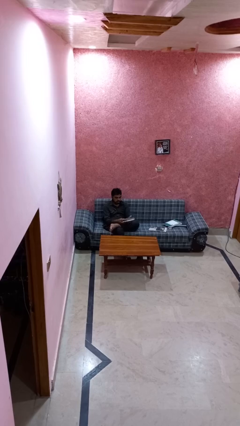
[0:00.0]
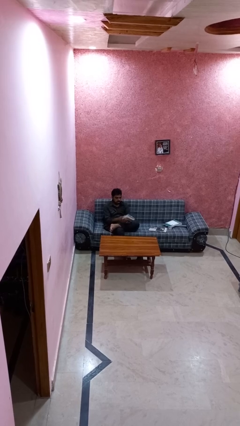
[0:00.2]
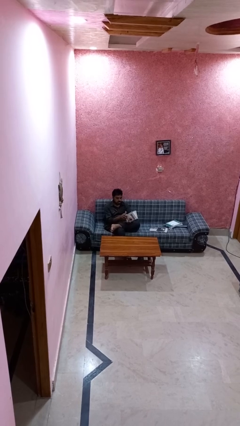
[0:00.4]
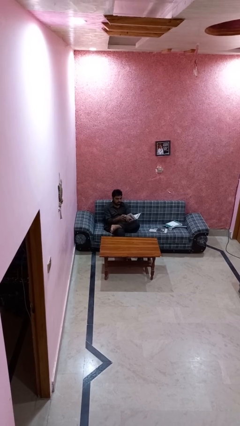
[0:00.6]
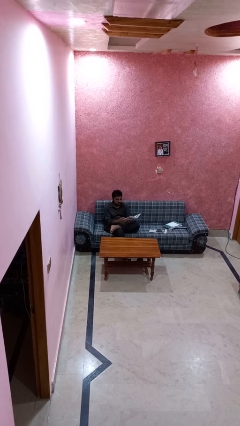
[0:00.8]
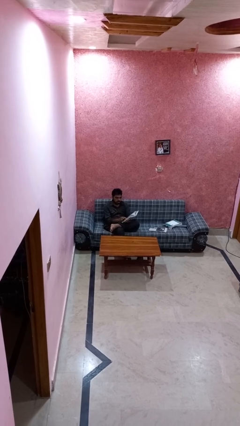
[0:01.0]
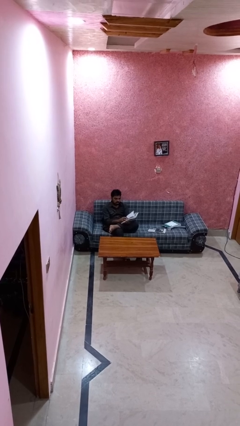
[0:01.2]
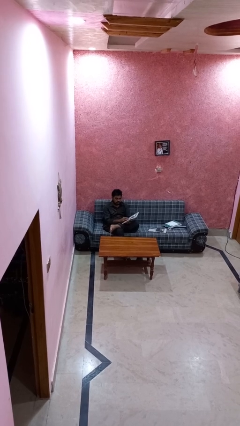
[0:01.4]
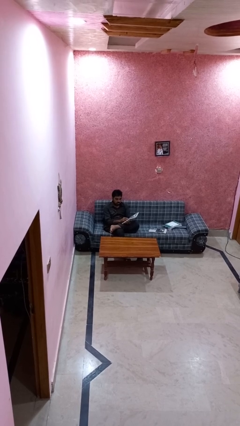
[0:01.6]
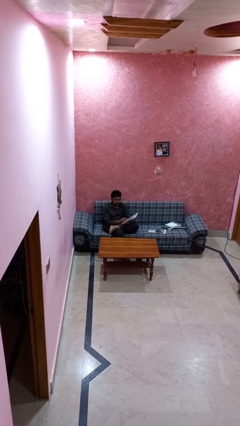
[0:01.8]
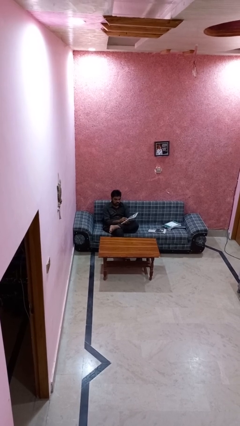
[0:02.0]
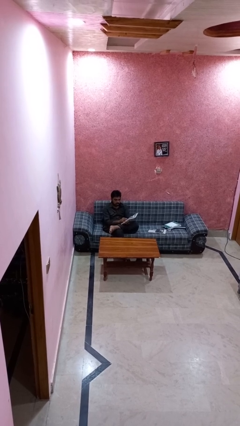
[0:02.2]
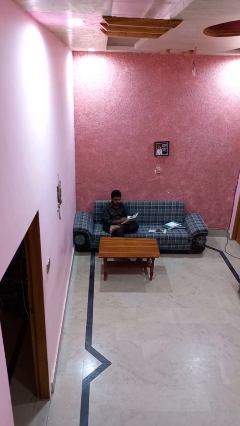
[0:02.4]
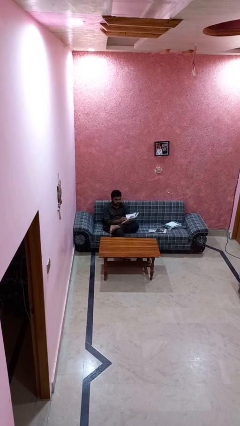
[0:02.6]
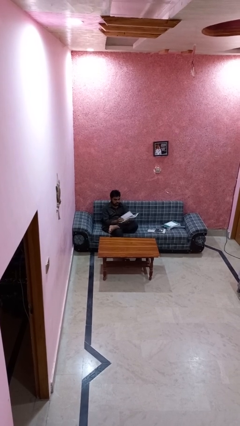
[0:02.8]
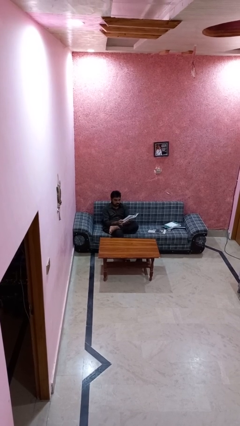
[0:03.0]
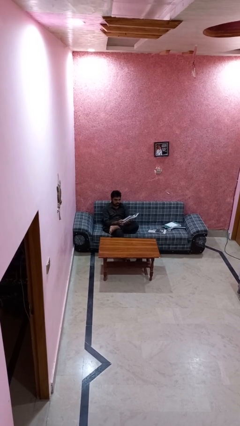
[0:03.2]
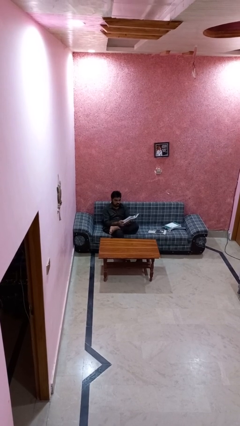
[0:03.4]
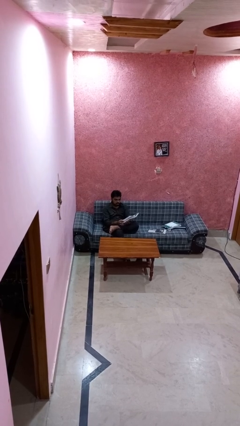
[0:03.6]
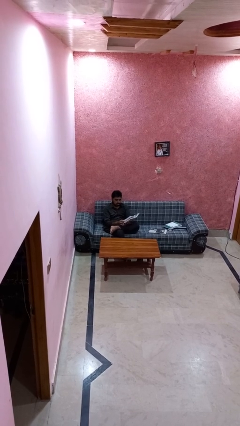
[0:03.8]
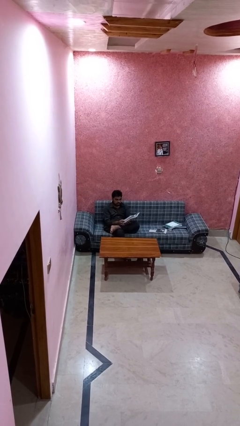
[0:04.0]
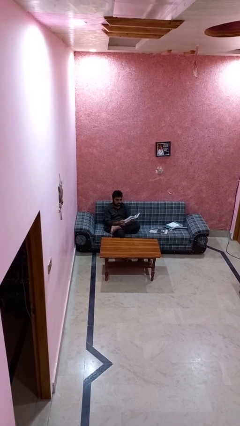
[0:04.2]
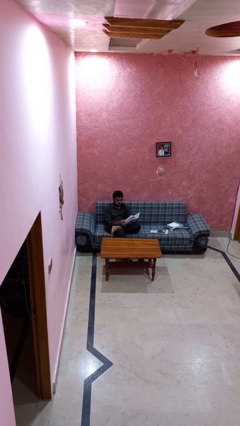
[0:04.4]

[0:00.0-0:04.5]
person reads book

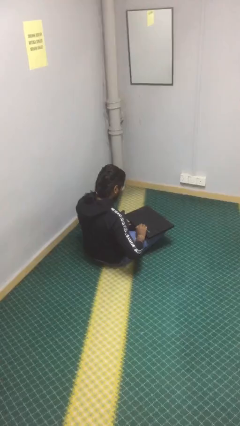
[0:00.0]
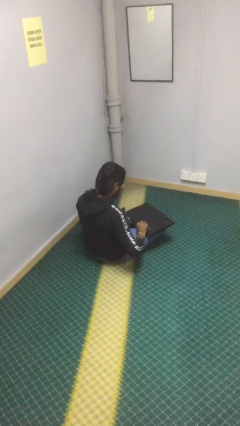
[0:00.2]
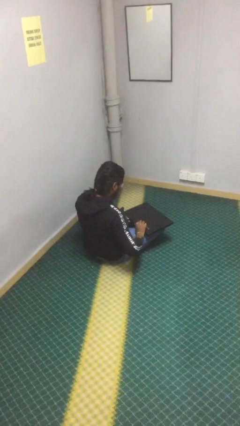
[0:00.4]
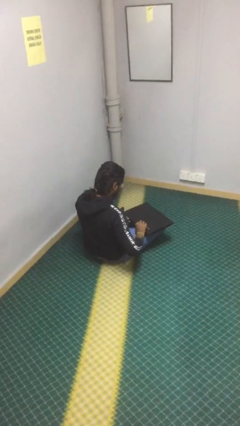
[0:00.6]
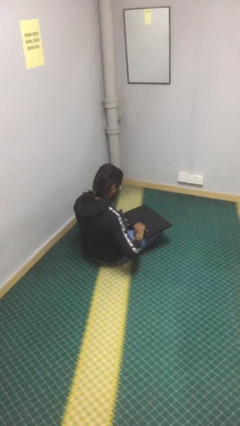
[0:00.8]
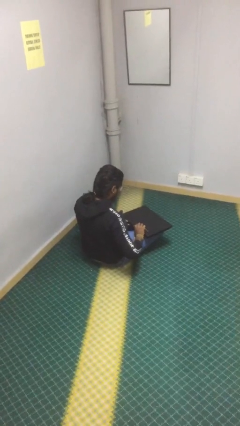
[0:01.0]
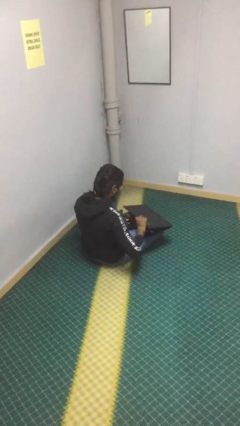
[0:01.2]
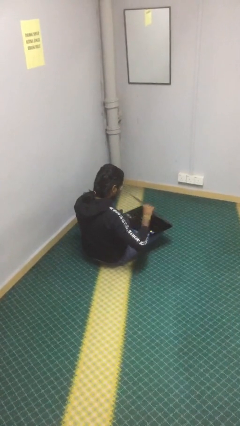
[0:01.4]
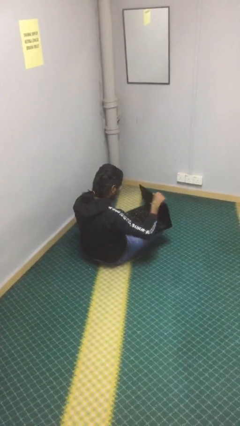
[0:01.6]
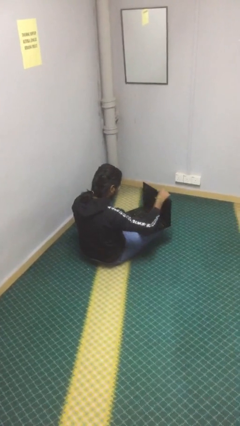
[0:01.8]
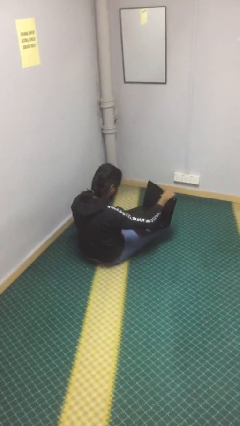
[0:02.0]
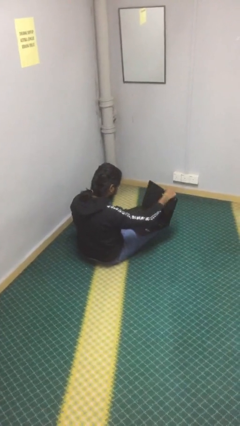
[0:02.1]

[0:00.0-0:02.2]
person opens laptop

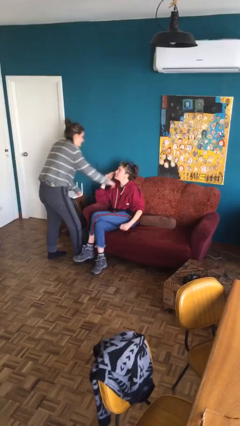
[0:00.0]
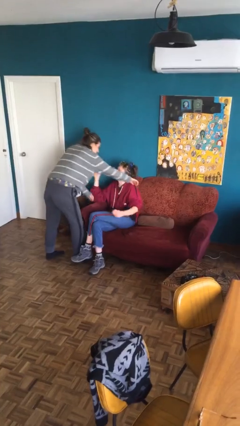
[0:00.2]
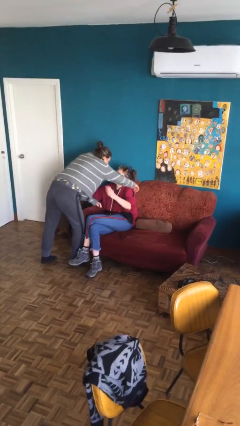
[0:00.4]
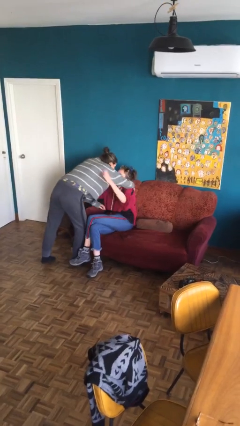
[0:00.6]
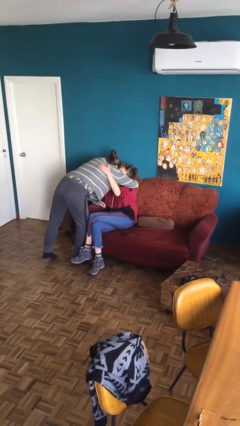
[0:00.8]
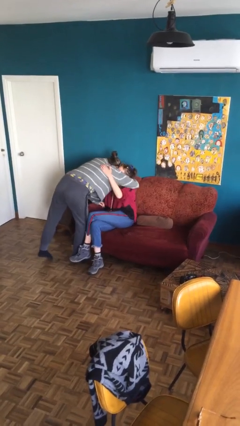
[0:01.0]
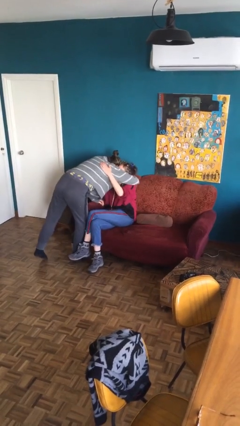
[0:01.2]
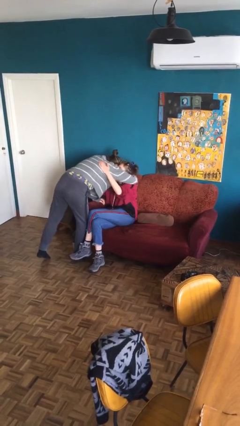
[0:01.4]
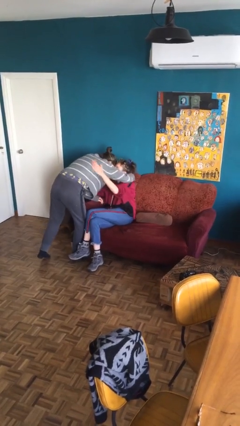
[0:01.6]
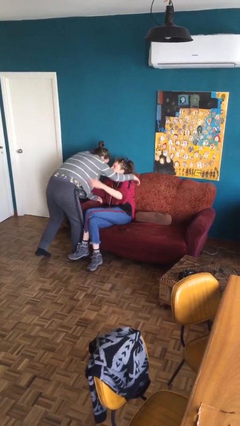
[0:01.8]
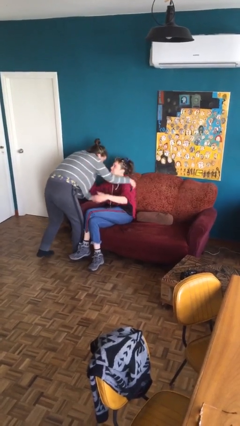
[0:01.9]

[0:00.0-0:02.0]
person embraces person

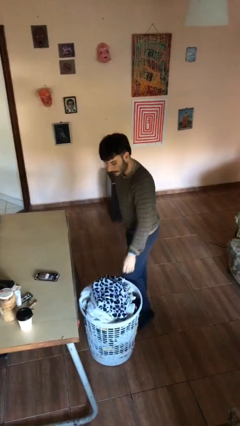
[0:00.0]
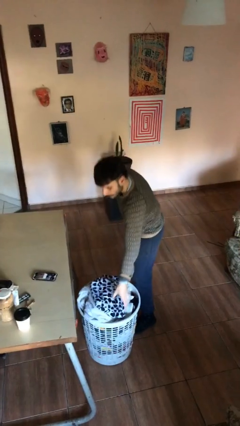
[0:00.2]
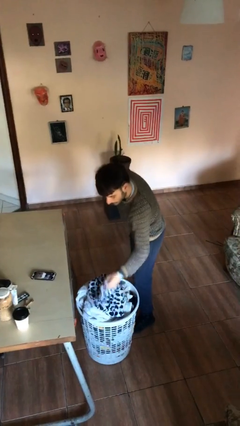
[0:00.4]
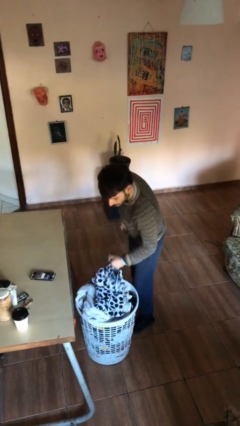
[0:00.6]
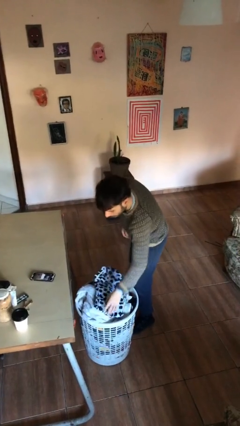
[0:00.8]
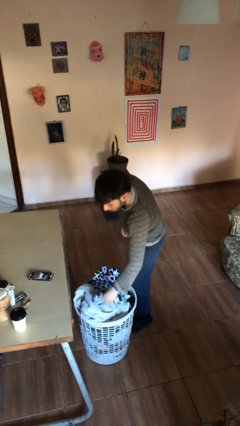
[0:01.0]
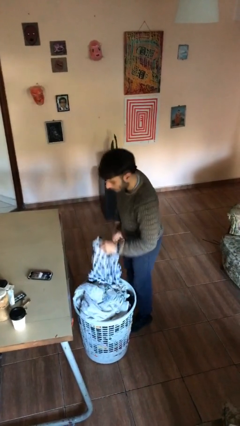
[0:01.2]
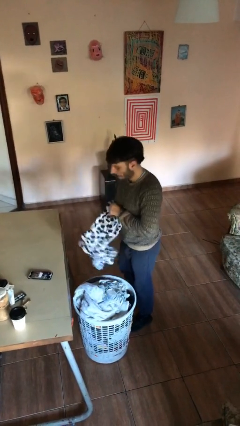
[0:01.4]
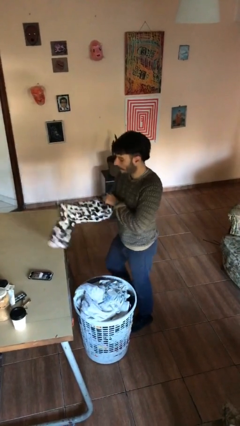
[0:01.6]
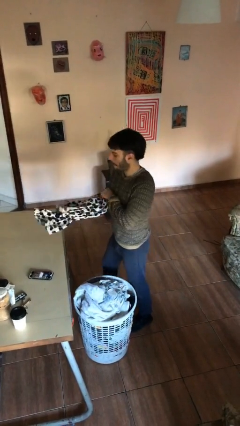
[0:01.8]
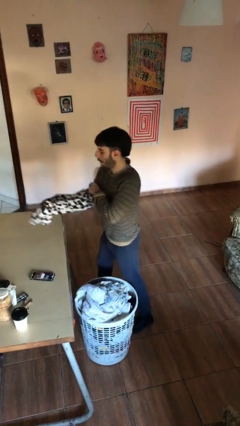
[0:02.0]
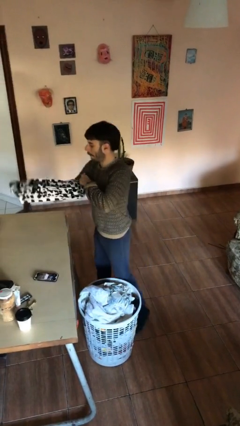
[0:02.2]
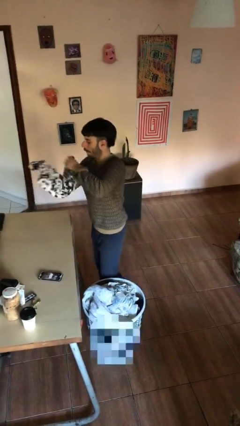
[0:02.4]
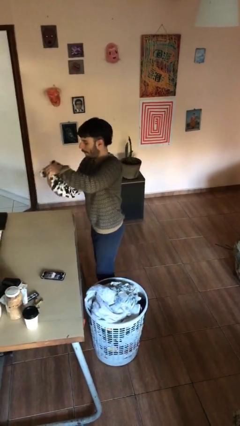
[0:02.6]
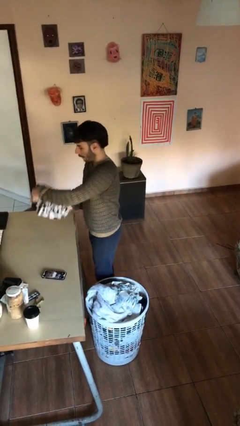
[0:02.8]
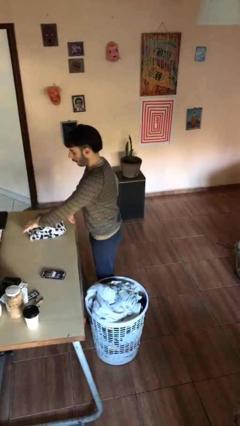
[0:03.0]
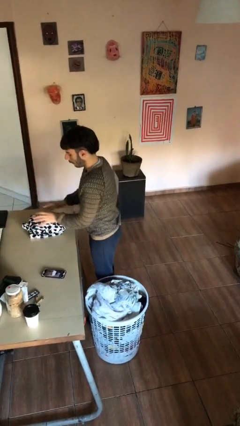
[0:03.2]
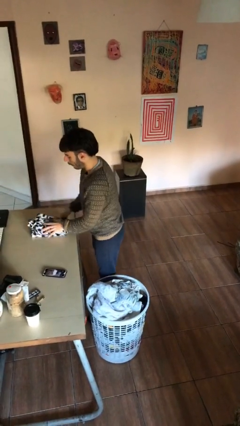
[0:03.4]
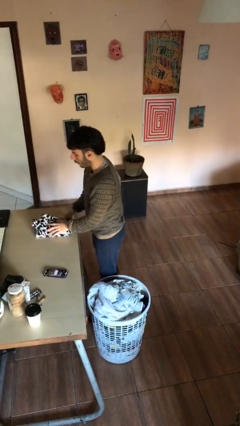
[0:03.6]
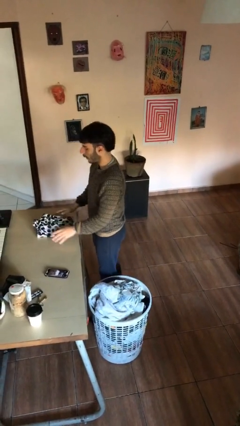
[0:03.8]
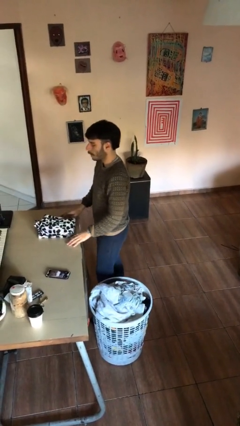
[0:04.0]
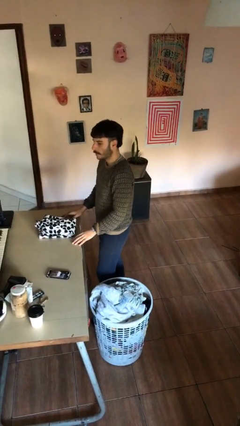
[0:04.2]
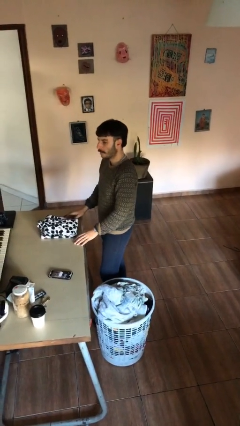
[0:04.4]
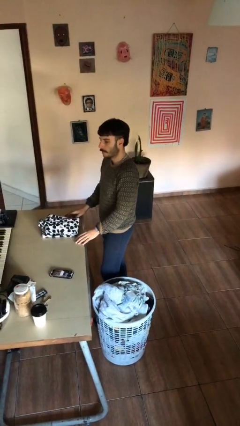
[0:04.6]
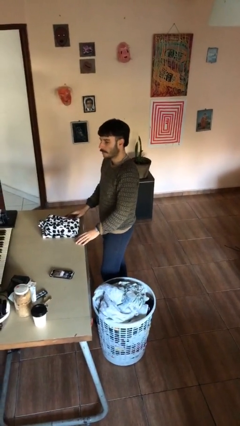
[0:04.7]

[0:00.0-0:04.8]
person folds pants

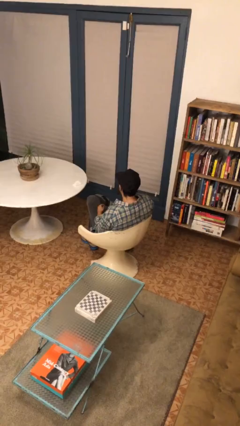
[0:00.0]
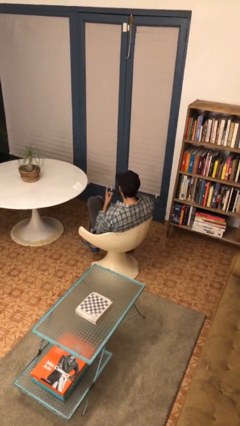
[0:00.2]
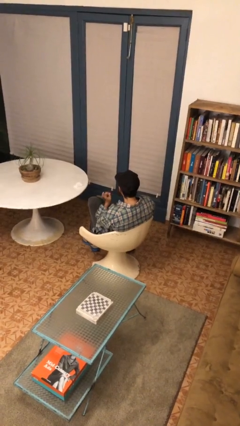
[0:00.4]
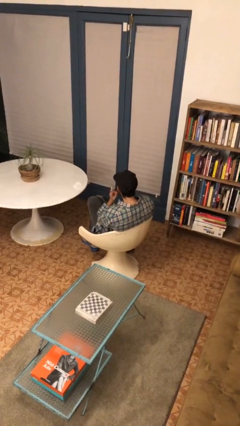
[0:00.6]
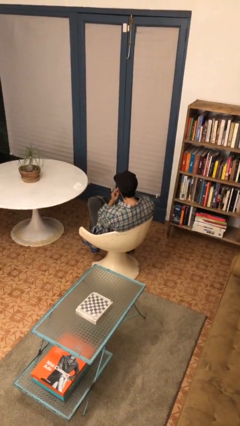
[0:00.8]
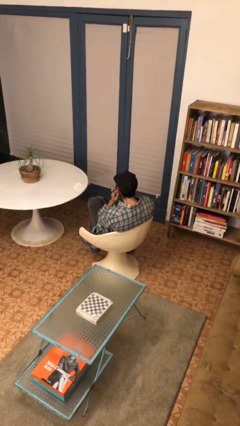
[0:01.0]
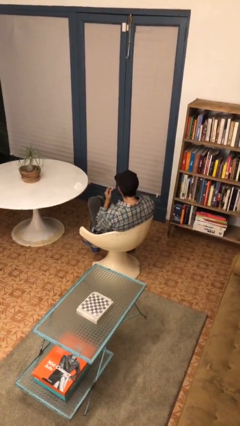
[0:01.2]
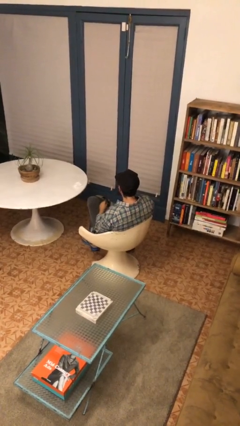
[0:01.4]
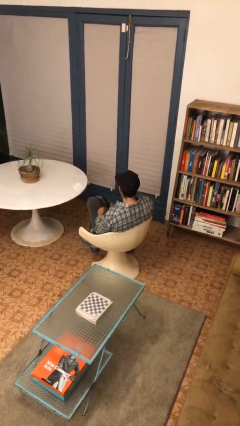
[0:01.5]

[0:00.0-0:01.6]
person gestures listen closely

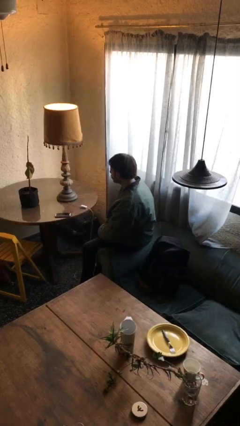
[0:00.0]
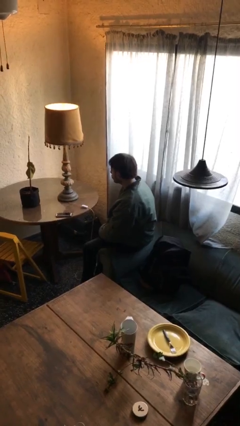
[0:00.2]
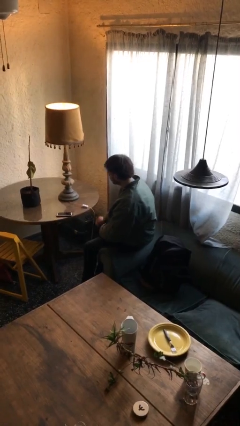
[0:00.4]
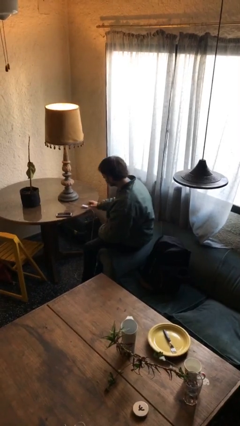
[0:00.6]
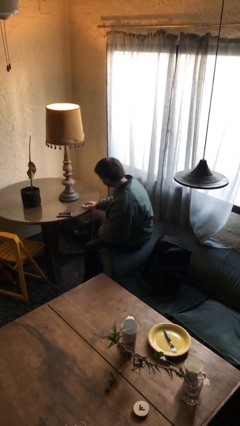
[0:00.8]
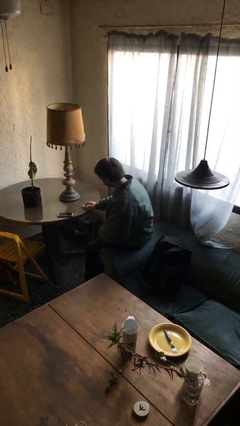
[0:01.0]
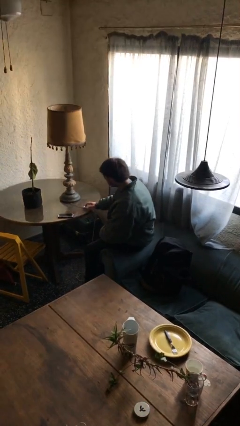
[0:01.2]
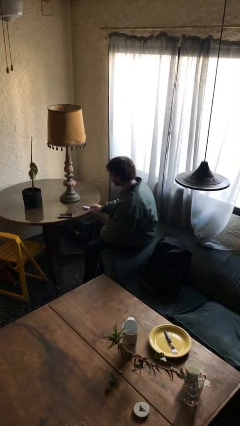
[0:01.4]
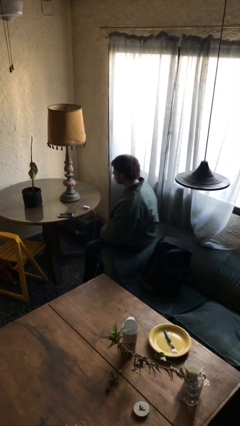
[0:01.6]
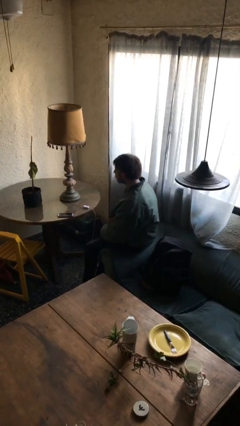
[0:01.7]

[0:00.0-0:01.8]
person turns off lamp

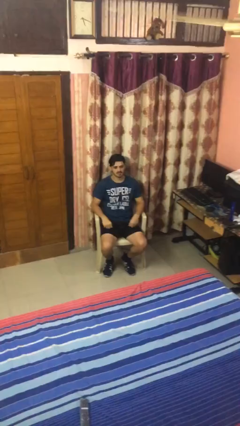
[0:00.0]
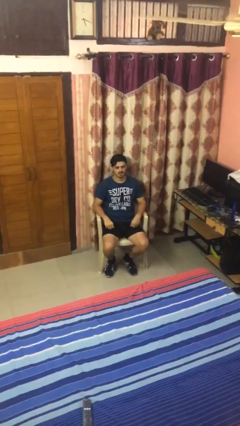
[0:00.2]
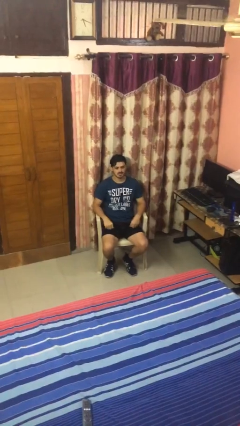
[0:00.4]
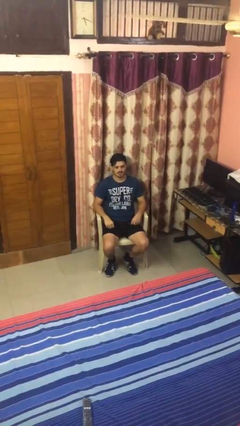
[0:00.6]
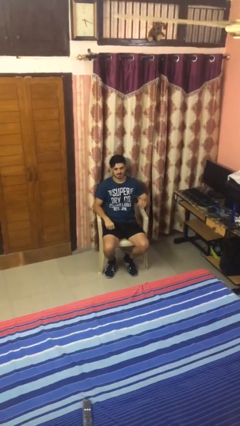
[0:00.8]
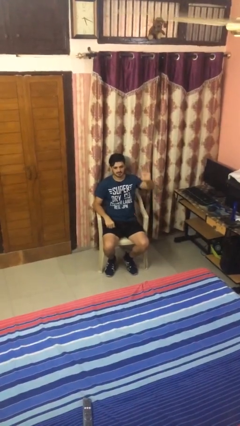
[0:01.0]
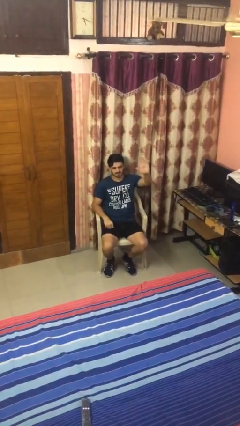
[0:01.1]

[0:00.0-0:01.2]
person gestures raise hand
